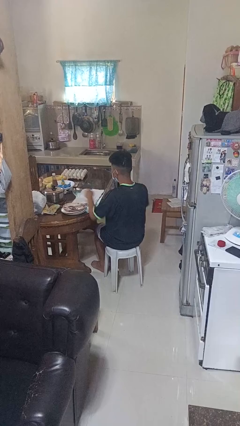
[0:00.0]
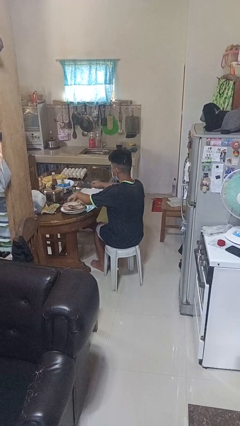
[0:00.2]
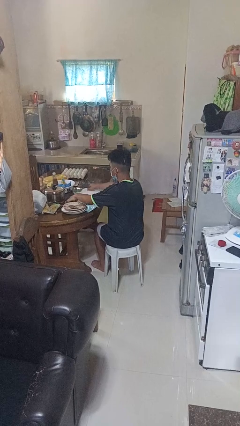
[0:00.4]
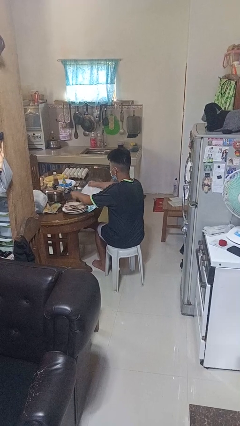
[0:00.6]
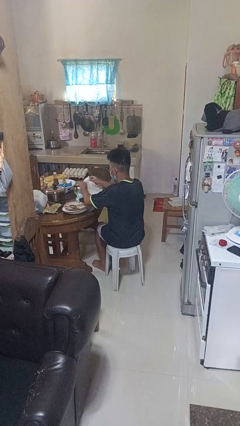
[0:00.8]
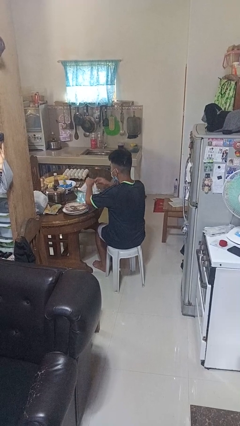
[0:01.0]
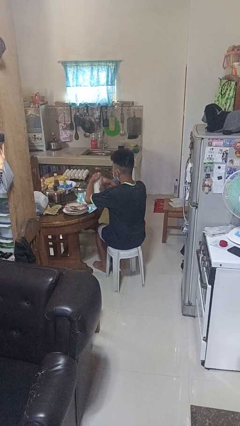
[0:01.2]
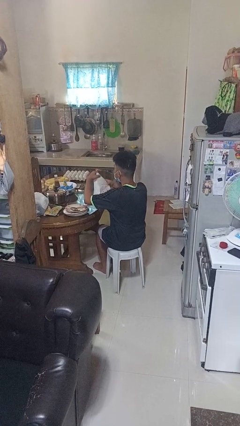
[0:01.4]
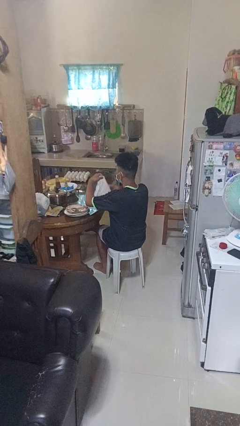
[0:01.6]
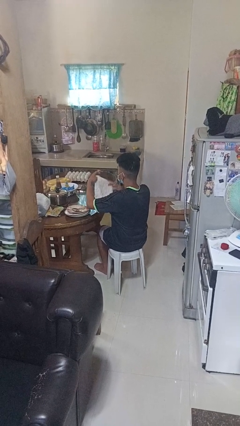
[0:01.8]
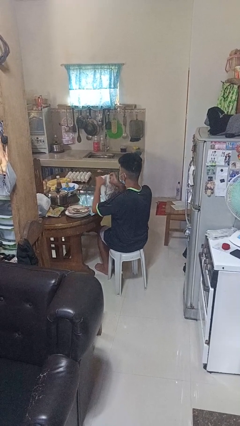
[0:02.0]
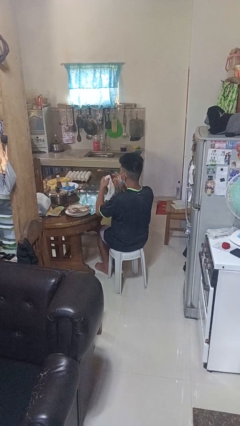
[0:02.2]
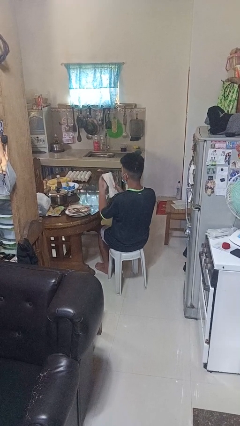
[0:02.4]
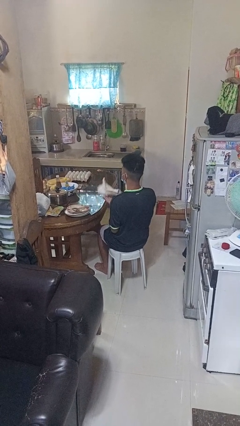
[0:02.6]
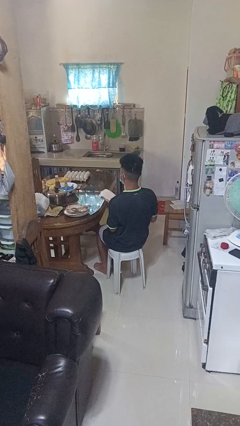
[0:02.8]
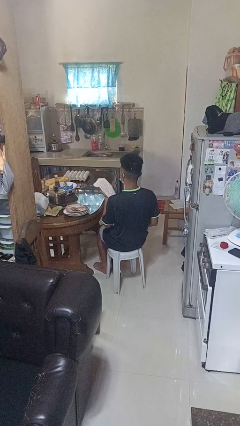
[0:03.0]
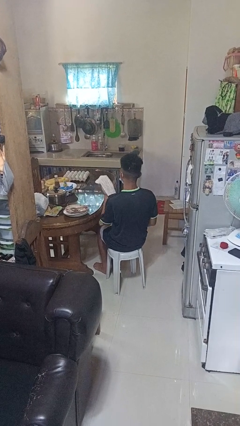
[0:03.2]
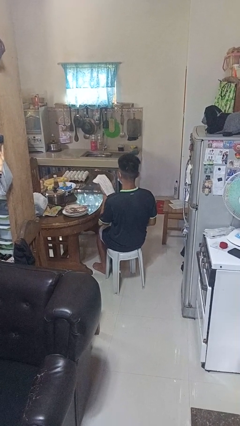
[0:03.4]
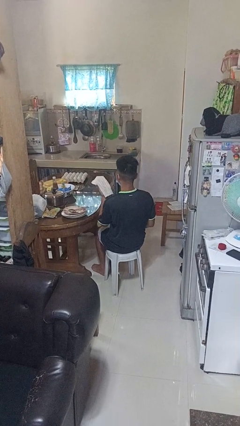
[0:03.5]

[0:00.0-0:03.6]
person folds tablecloth

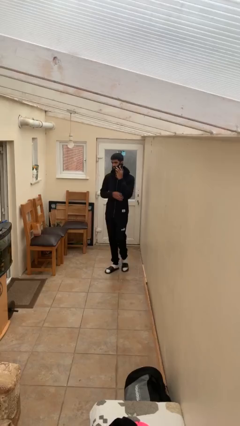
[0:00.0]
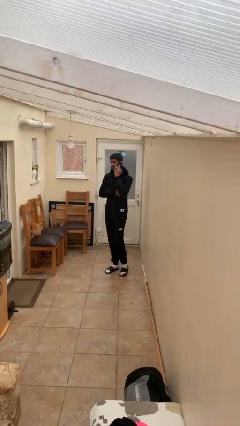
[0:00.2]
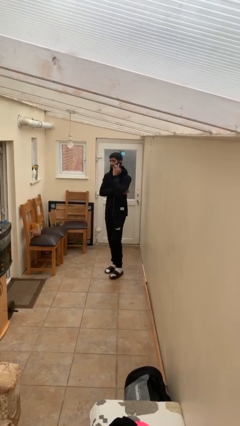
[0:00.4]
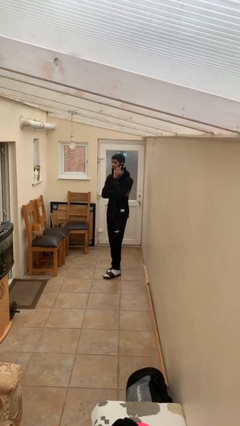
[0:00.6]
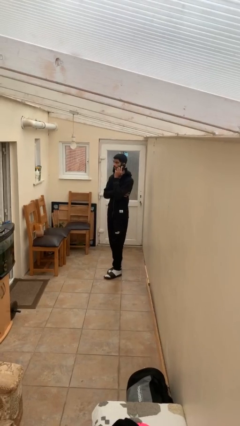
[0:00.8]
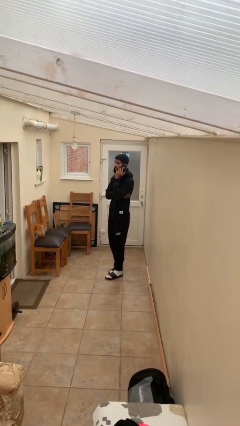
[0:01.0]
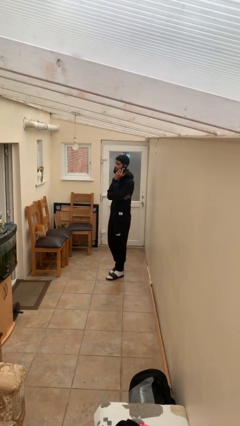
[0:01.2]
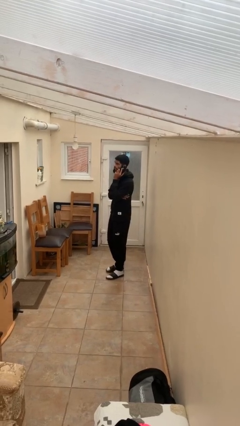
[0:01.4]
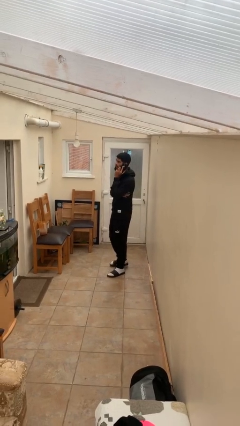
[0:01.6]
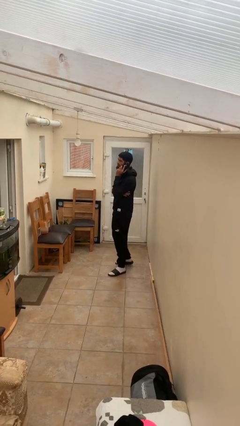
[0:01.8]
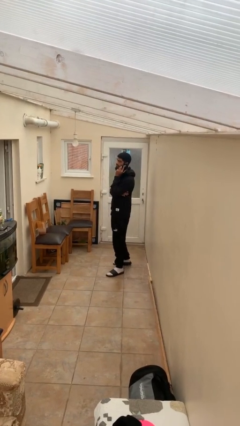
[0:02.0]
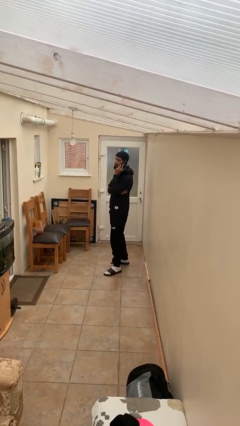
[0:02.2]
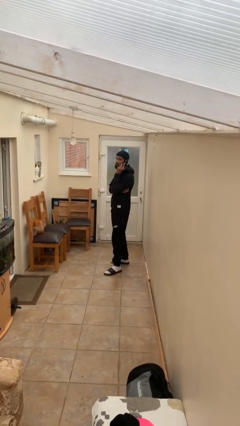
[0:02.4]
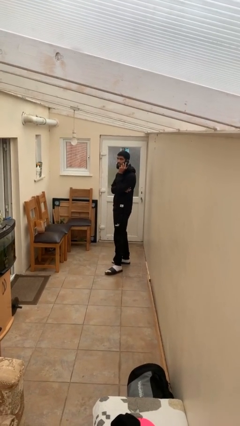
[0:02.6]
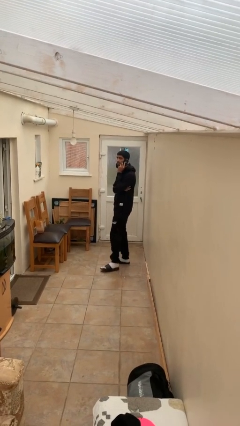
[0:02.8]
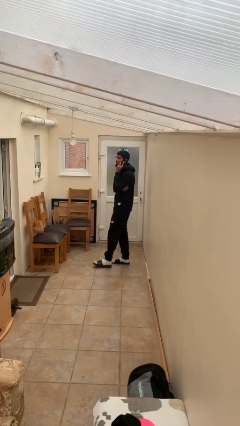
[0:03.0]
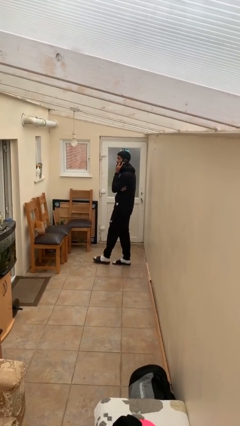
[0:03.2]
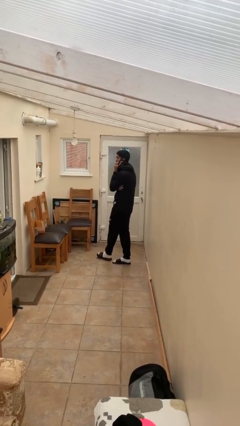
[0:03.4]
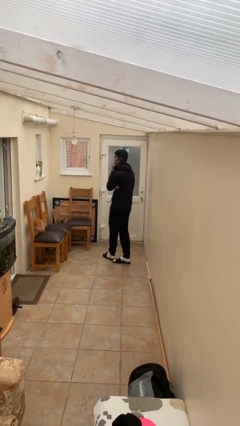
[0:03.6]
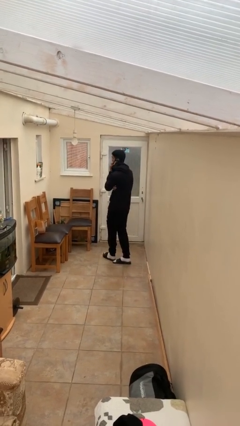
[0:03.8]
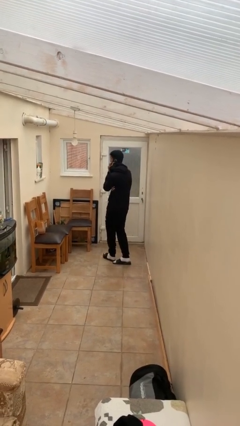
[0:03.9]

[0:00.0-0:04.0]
person talks on phone

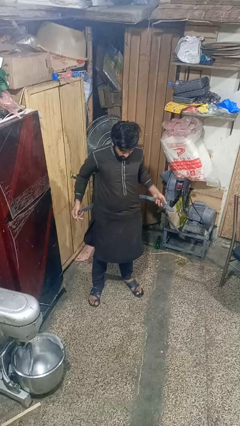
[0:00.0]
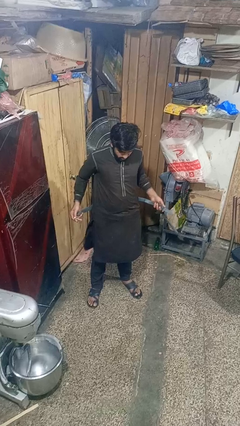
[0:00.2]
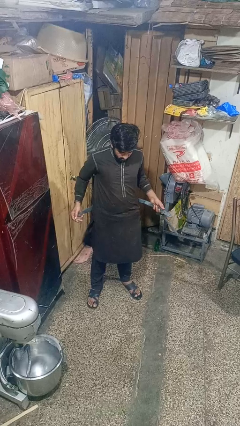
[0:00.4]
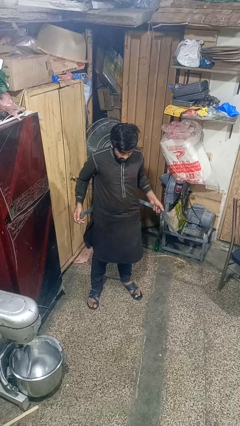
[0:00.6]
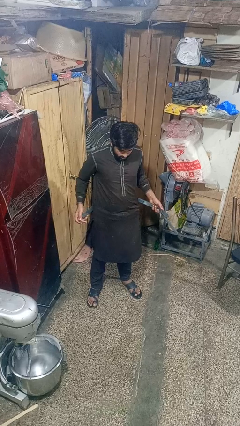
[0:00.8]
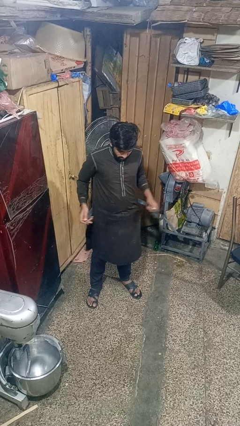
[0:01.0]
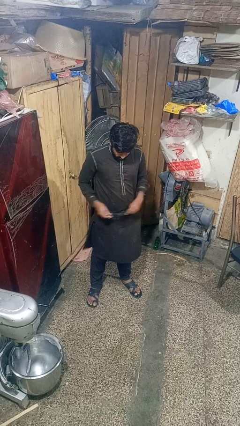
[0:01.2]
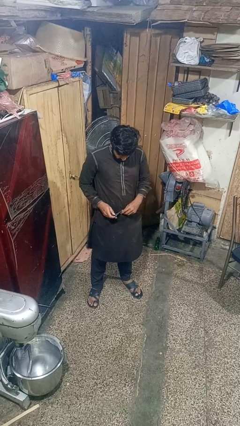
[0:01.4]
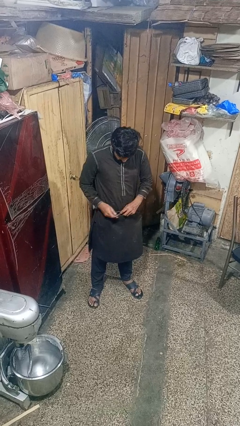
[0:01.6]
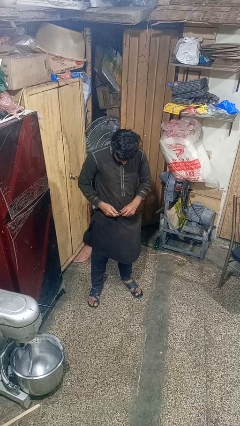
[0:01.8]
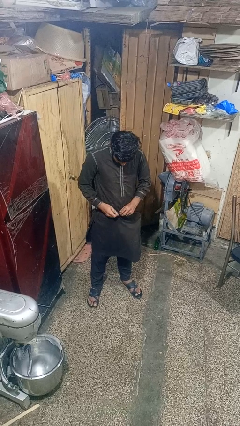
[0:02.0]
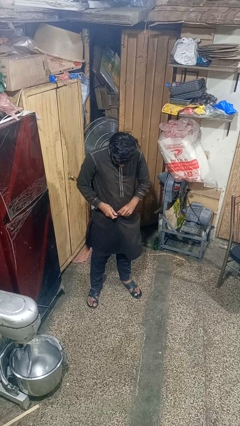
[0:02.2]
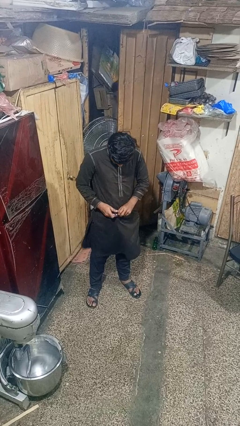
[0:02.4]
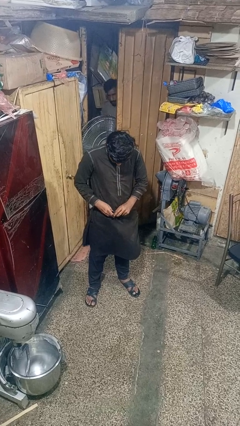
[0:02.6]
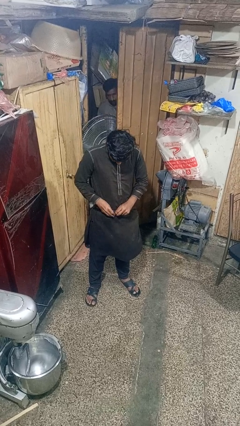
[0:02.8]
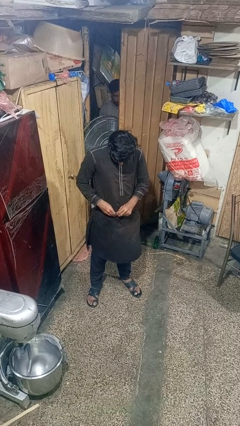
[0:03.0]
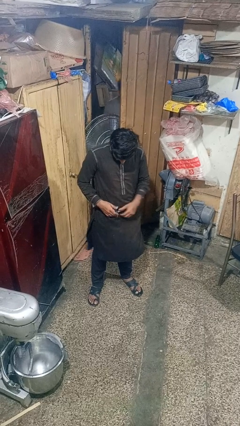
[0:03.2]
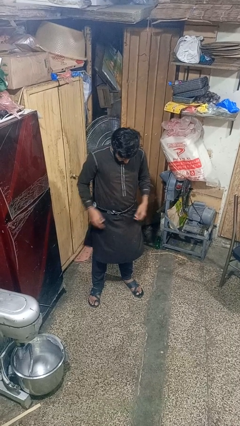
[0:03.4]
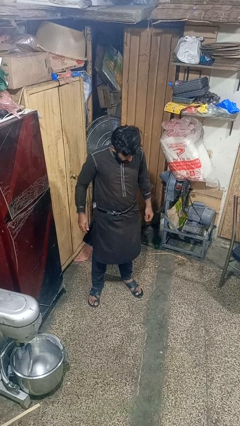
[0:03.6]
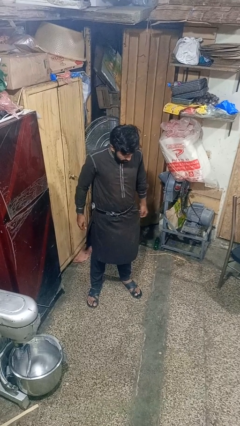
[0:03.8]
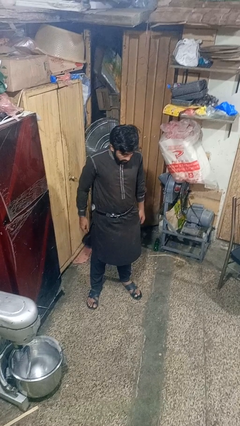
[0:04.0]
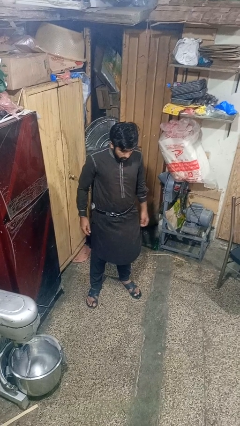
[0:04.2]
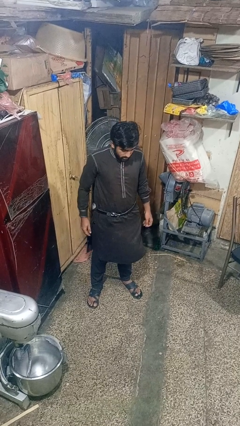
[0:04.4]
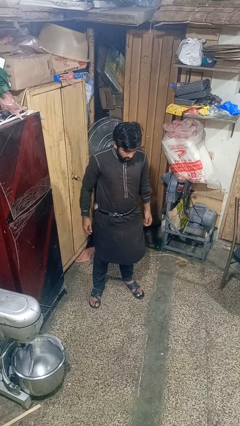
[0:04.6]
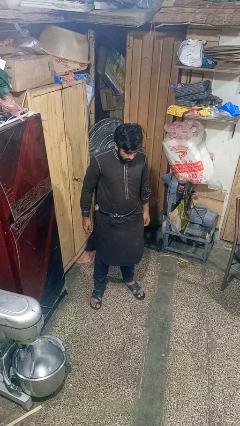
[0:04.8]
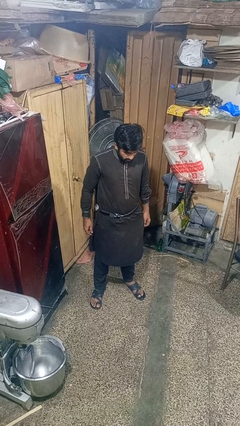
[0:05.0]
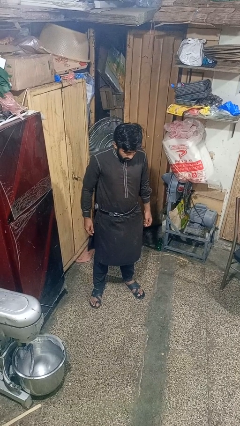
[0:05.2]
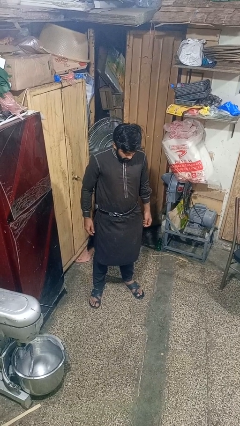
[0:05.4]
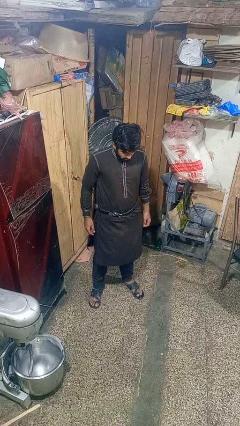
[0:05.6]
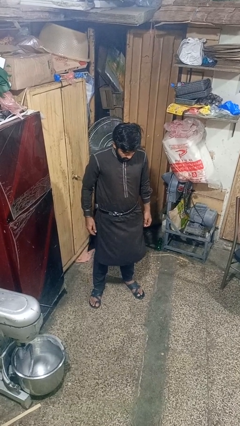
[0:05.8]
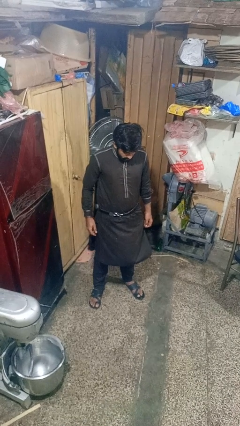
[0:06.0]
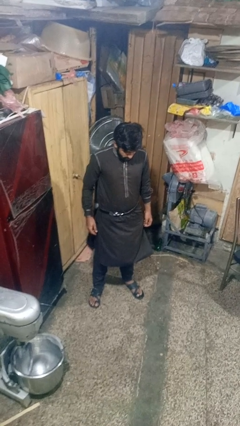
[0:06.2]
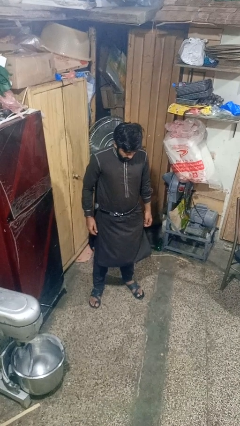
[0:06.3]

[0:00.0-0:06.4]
person puts on belt

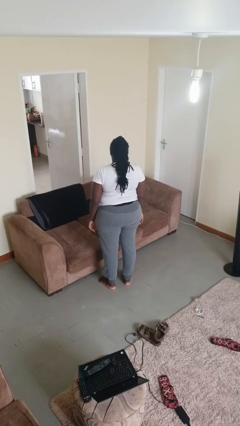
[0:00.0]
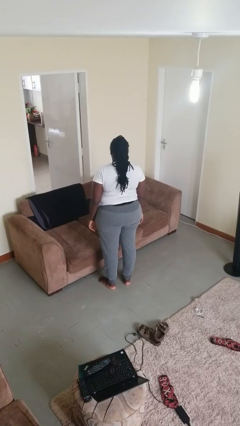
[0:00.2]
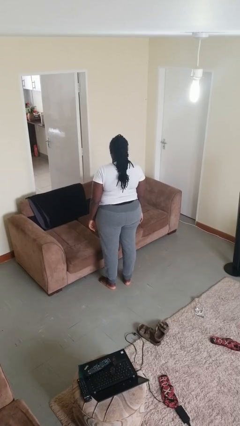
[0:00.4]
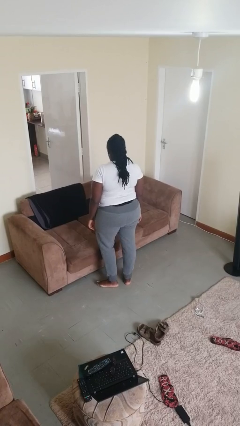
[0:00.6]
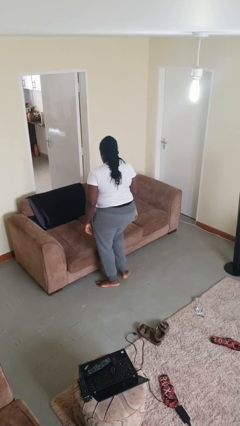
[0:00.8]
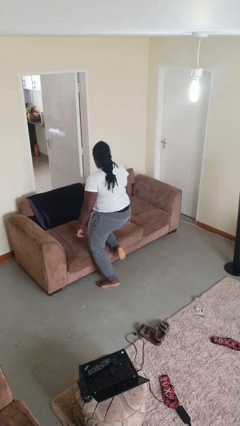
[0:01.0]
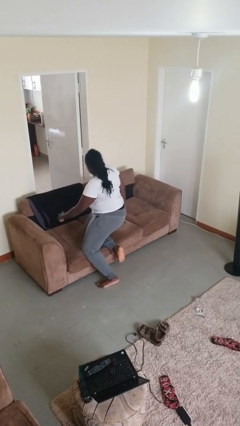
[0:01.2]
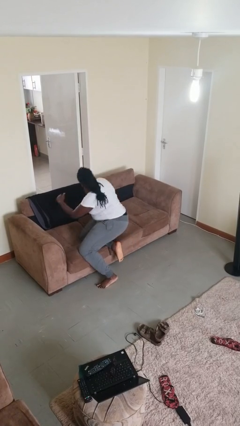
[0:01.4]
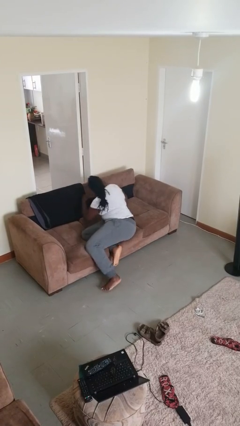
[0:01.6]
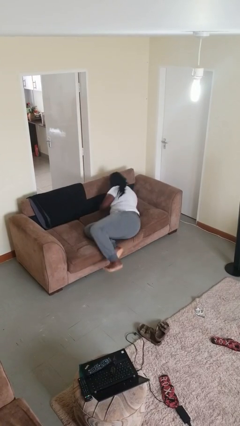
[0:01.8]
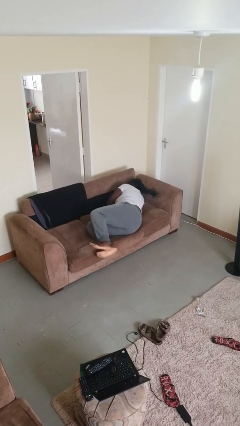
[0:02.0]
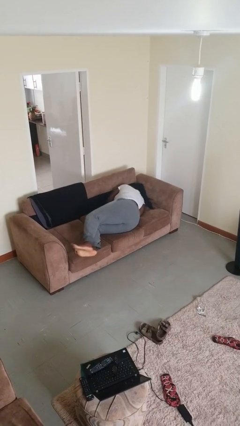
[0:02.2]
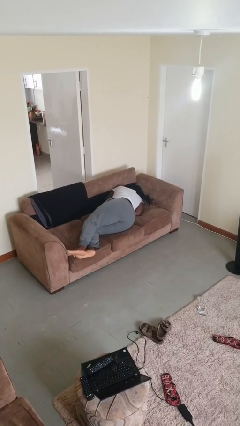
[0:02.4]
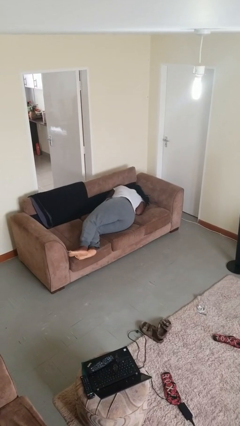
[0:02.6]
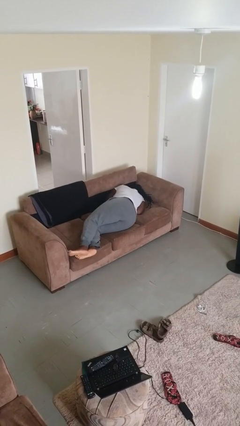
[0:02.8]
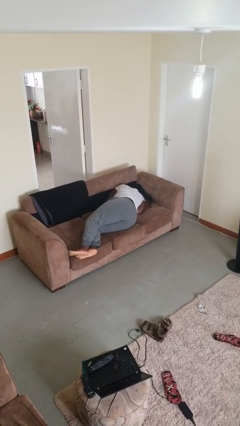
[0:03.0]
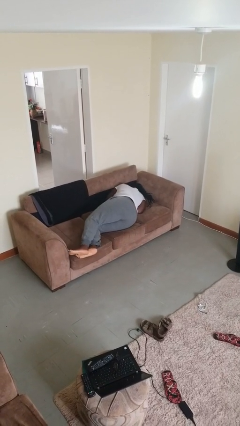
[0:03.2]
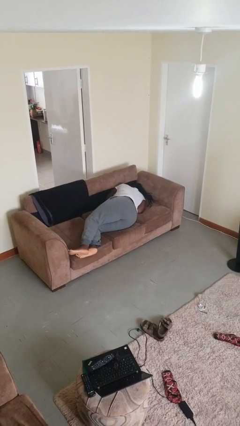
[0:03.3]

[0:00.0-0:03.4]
person lies down on bed

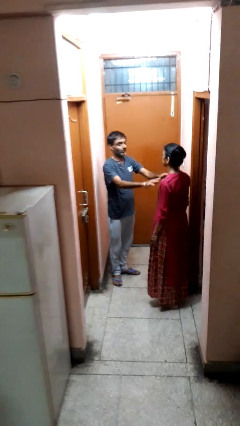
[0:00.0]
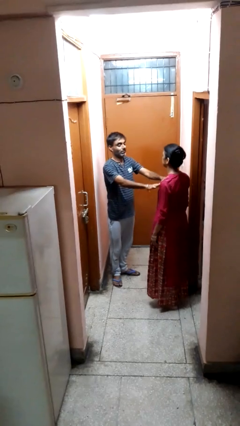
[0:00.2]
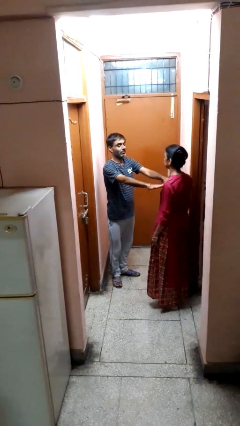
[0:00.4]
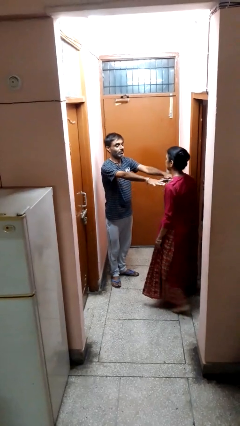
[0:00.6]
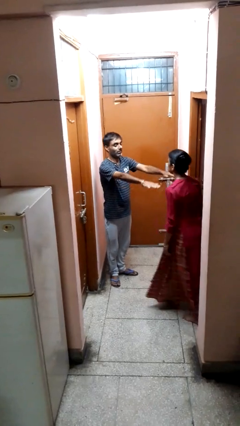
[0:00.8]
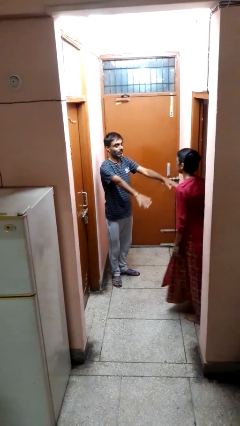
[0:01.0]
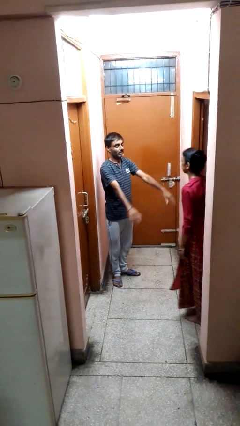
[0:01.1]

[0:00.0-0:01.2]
person shoves person
